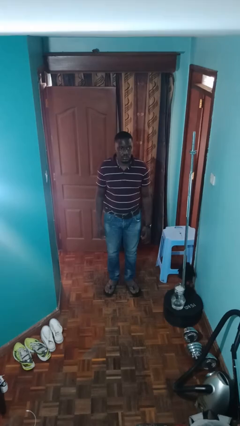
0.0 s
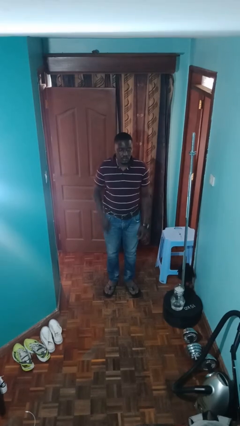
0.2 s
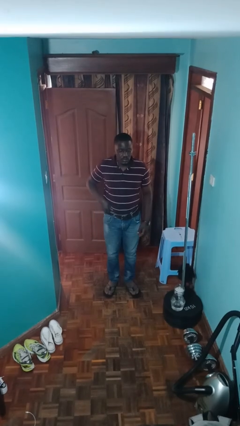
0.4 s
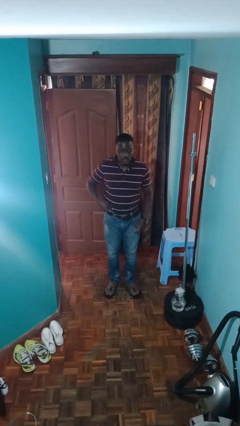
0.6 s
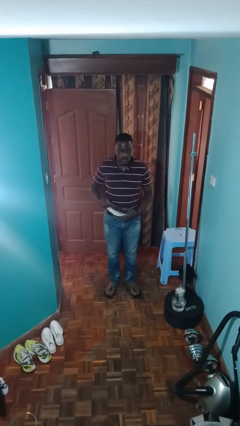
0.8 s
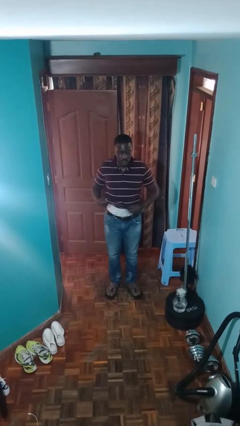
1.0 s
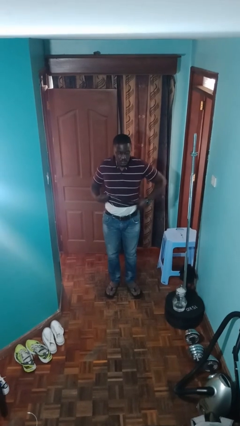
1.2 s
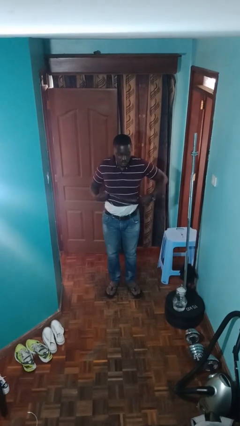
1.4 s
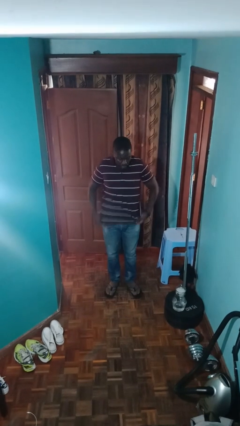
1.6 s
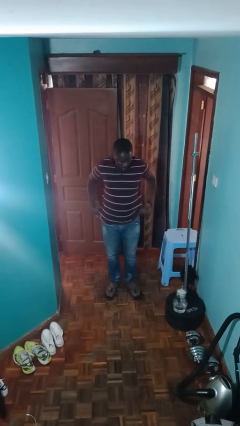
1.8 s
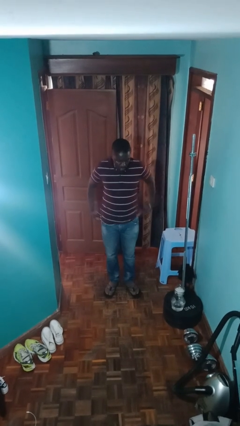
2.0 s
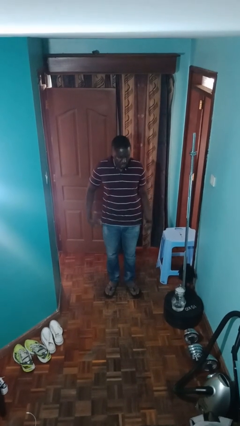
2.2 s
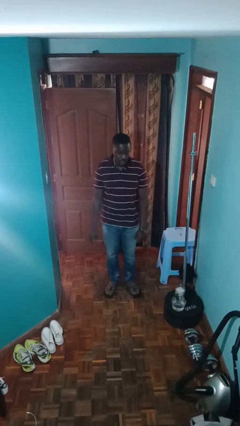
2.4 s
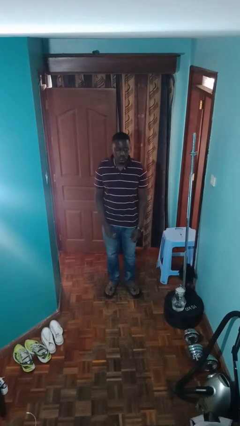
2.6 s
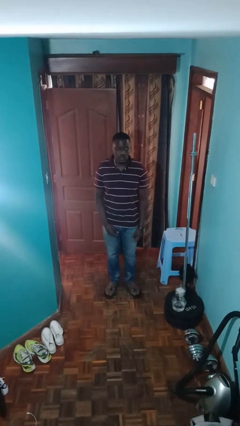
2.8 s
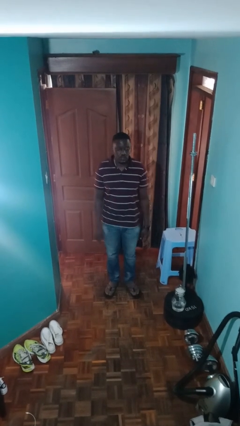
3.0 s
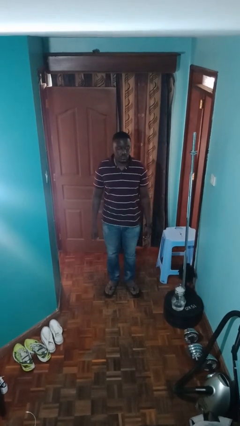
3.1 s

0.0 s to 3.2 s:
person untucks shirt

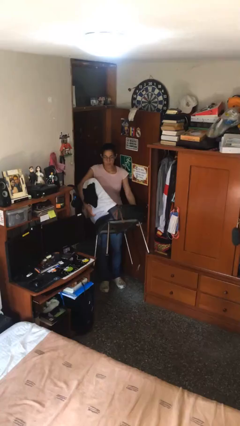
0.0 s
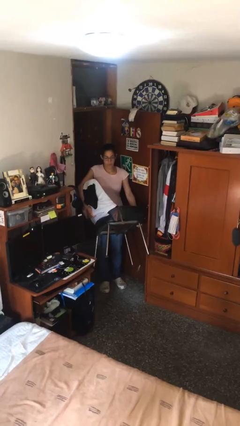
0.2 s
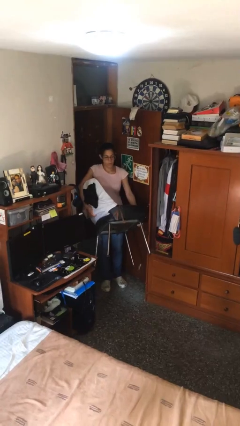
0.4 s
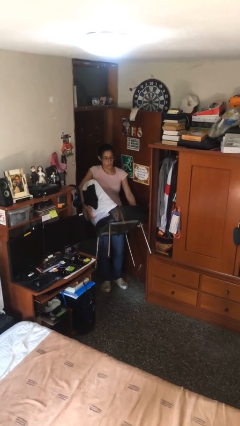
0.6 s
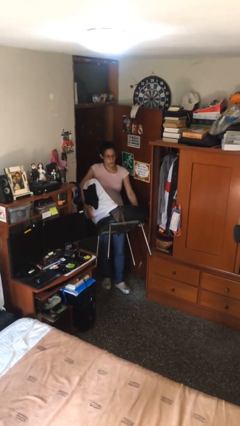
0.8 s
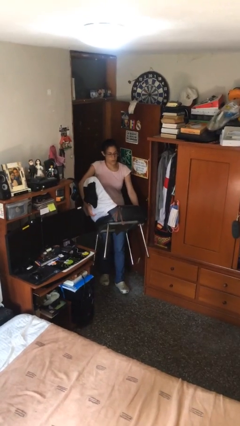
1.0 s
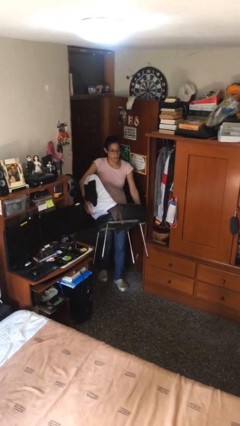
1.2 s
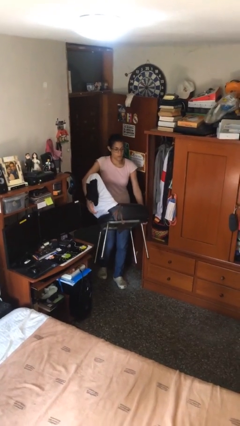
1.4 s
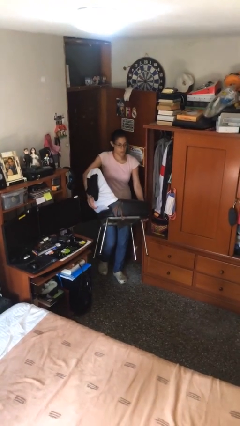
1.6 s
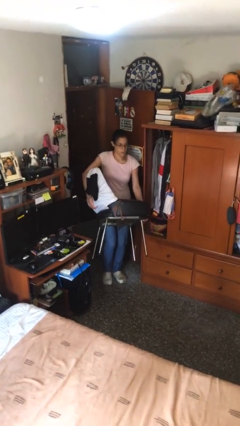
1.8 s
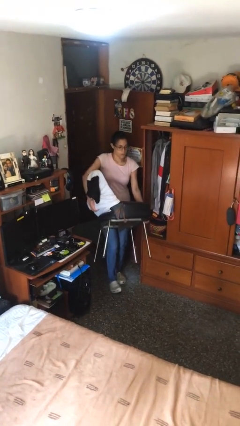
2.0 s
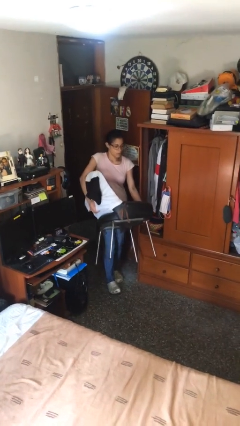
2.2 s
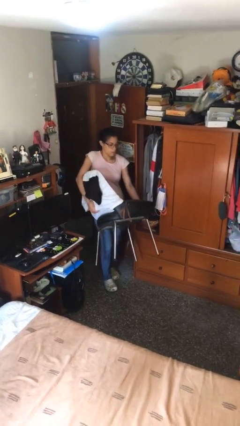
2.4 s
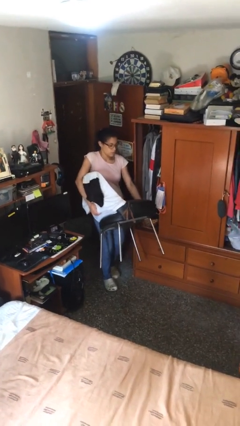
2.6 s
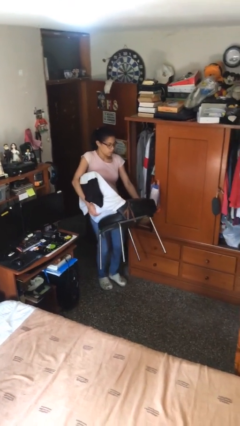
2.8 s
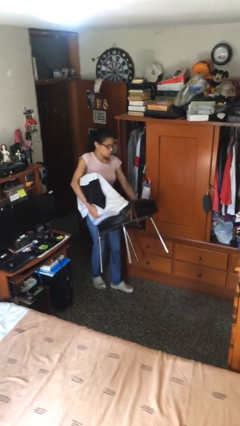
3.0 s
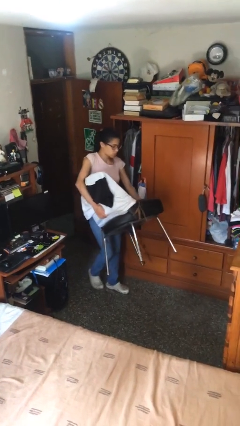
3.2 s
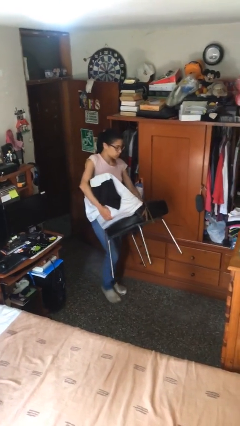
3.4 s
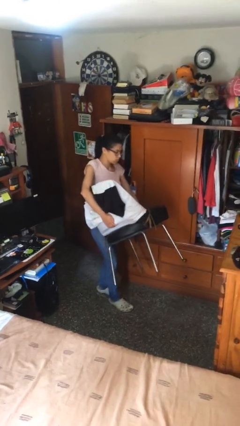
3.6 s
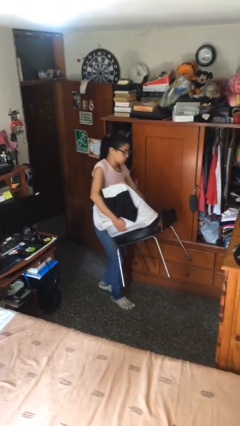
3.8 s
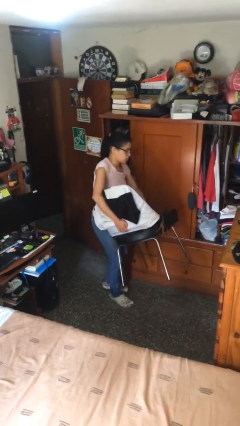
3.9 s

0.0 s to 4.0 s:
person carries heavy object

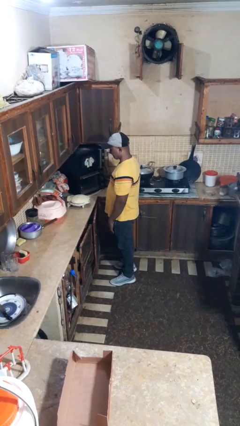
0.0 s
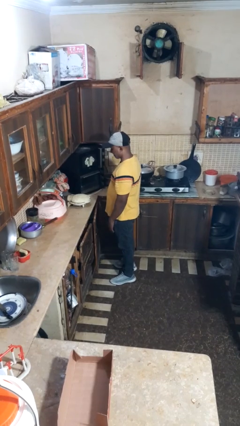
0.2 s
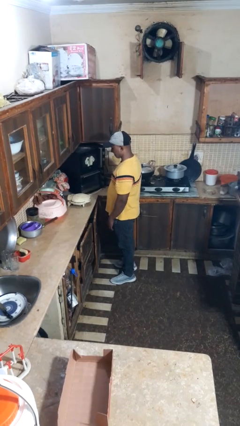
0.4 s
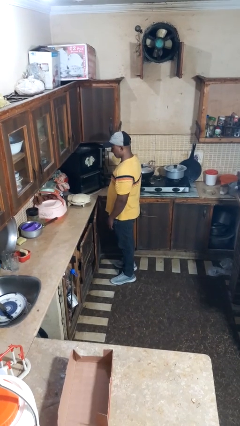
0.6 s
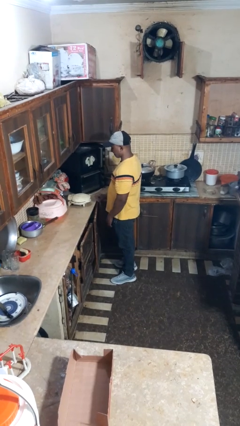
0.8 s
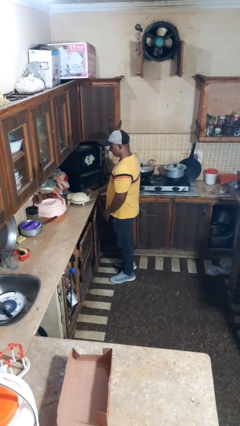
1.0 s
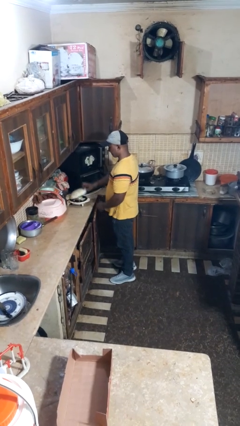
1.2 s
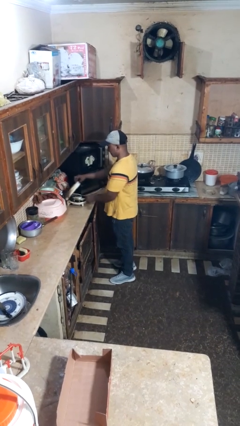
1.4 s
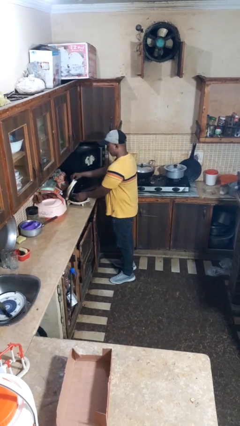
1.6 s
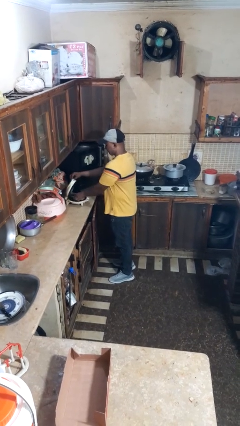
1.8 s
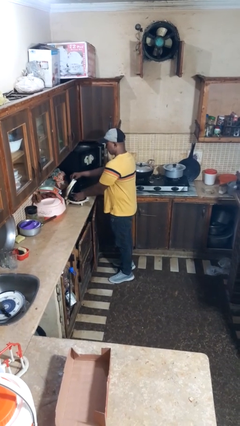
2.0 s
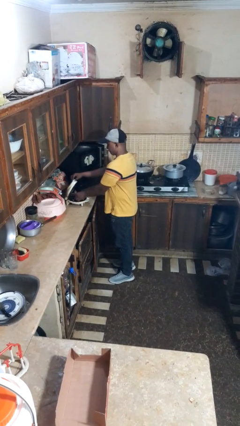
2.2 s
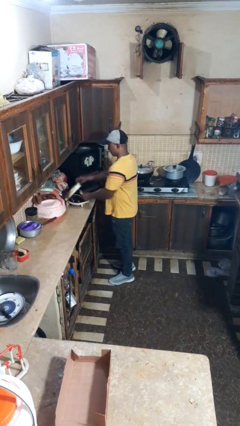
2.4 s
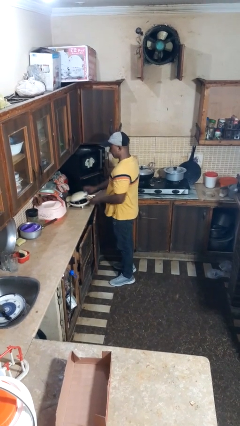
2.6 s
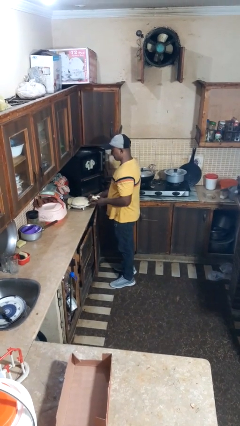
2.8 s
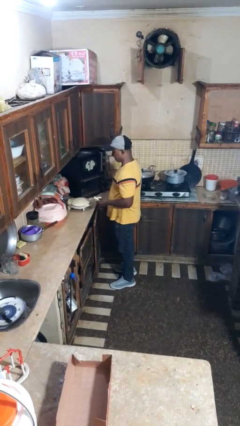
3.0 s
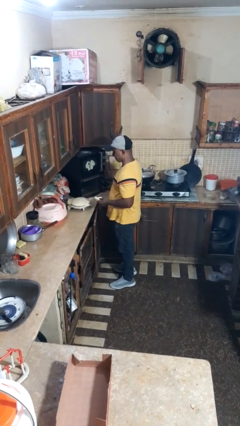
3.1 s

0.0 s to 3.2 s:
person takes object from toaster

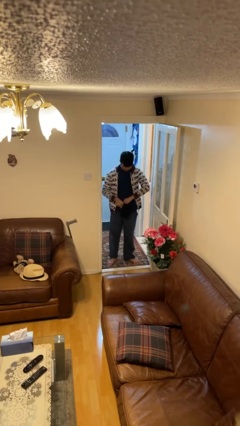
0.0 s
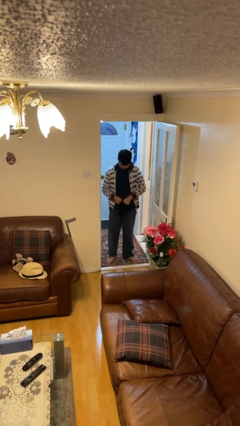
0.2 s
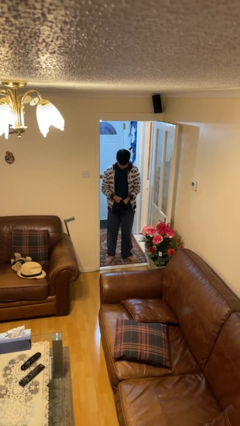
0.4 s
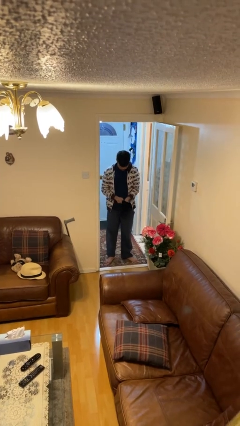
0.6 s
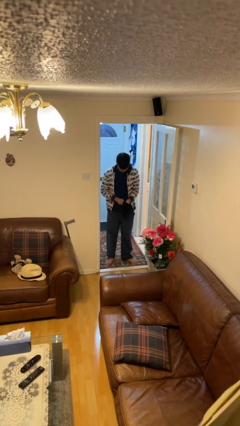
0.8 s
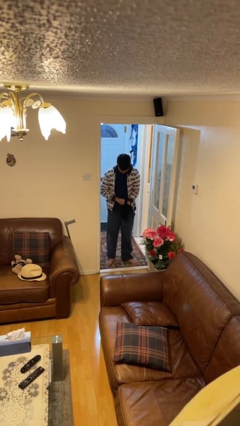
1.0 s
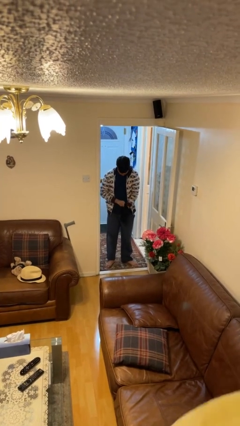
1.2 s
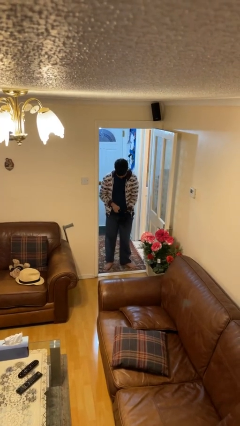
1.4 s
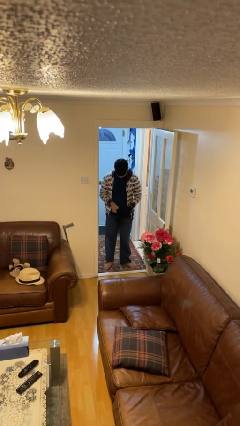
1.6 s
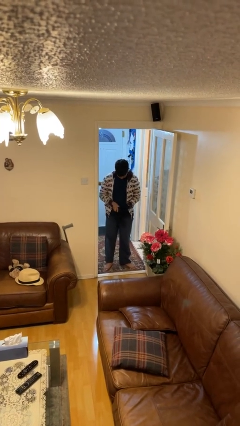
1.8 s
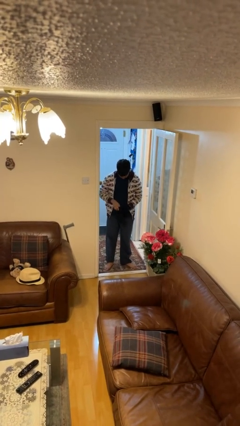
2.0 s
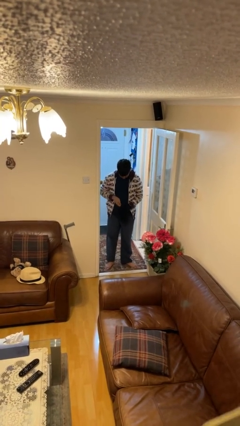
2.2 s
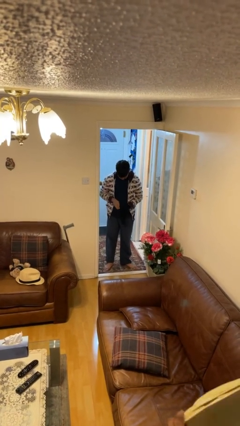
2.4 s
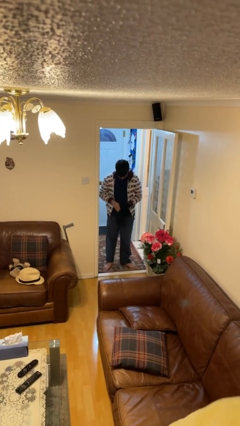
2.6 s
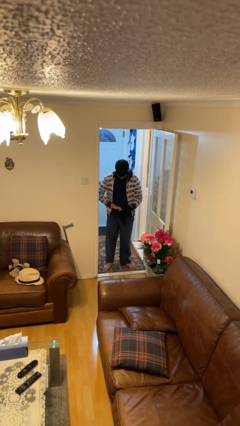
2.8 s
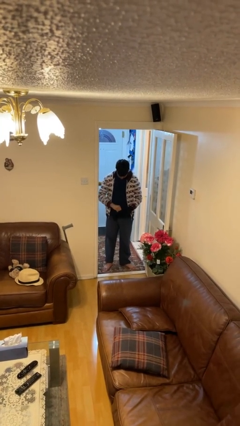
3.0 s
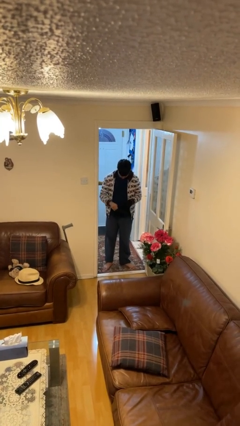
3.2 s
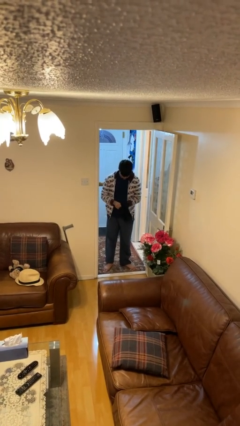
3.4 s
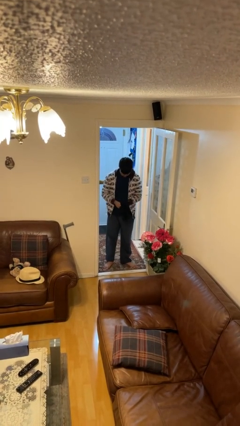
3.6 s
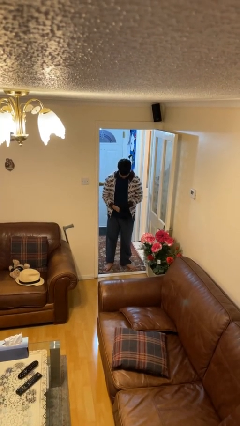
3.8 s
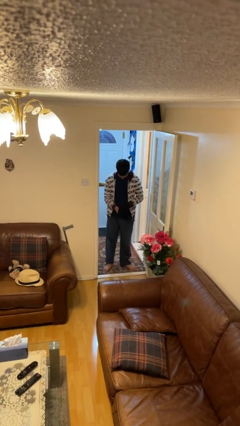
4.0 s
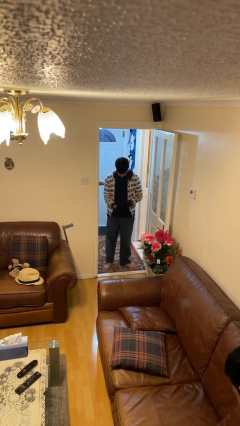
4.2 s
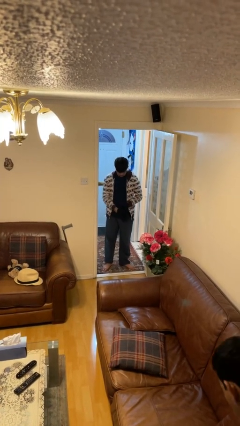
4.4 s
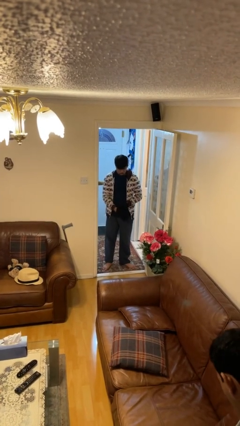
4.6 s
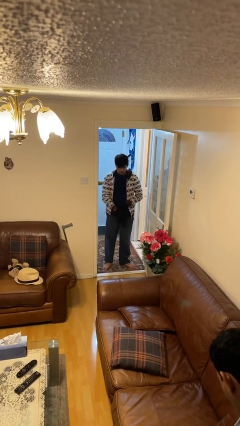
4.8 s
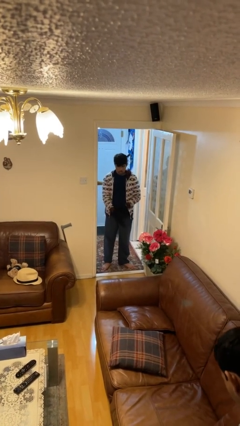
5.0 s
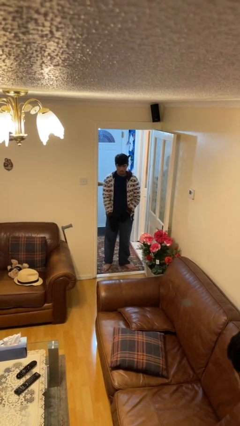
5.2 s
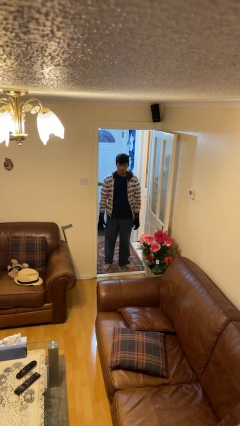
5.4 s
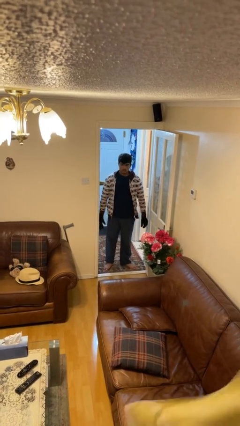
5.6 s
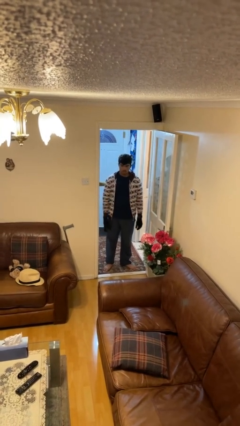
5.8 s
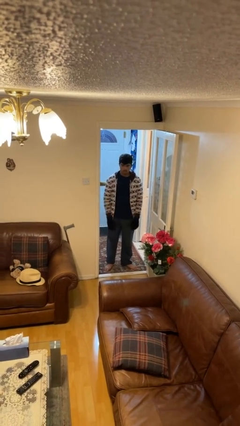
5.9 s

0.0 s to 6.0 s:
person puts on gloves

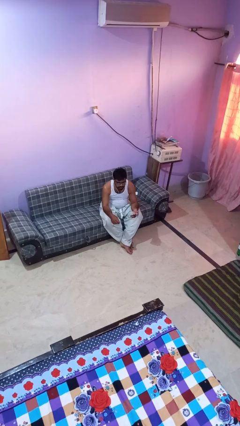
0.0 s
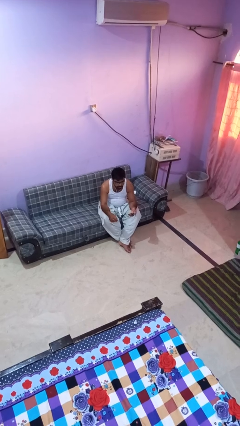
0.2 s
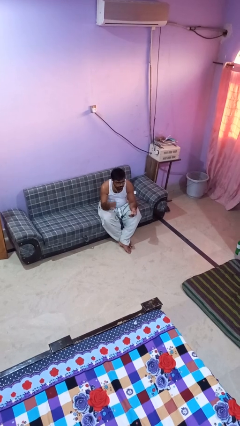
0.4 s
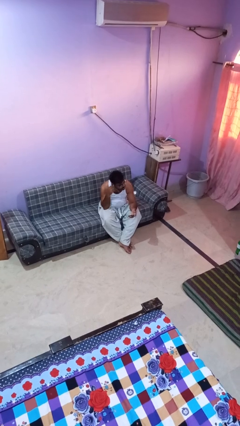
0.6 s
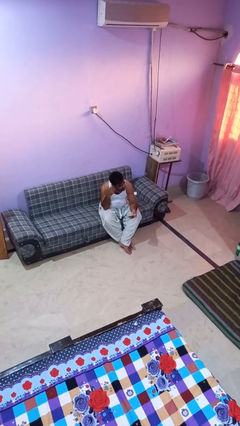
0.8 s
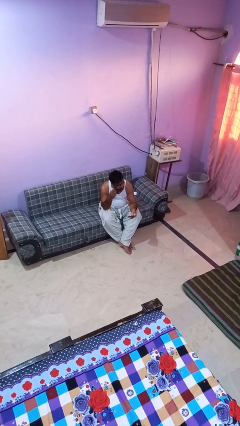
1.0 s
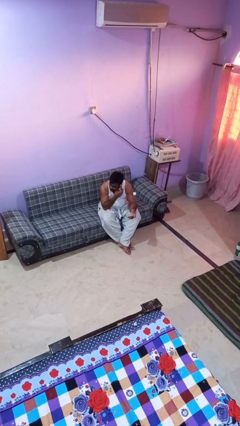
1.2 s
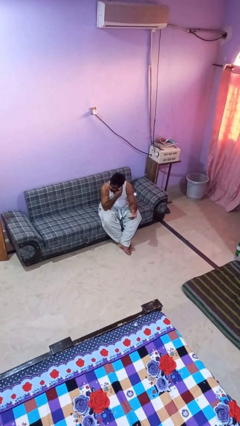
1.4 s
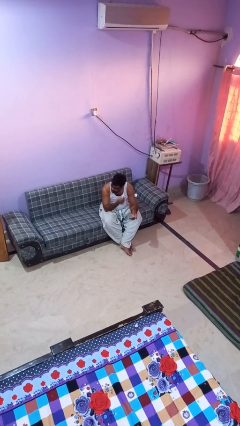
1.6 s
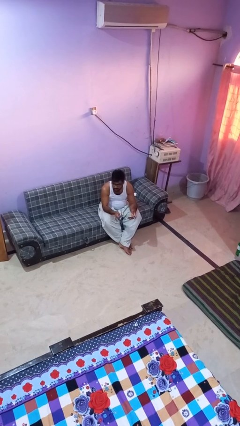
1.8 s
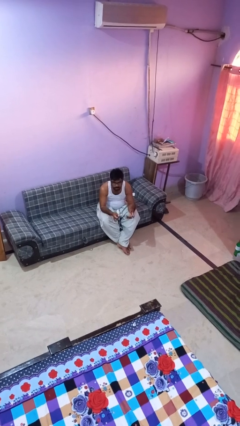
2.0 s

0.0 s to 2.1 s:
person takes off headphones
